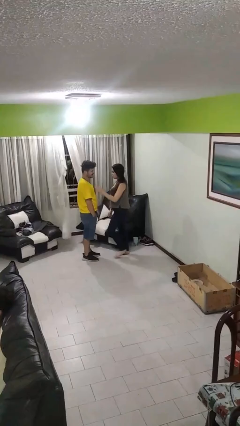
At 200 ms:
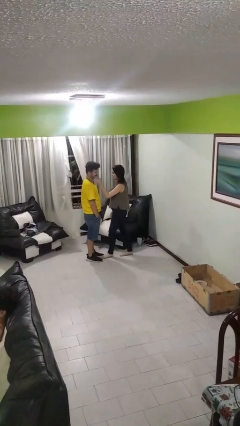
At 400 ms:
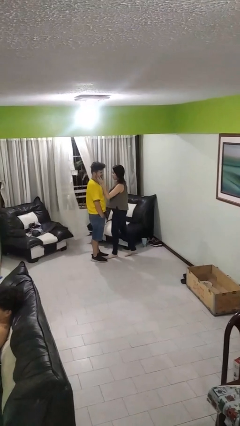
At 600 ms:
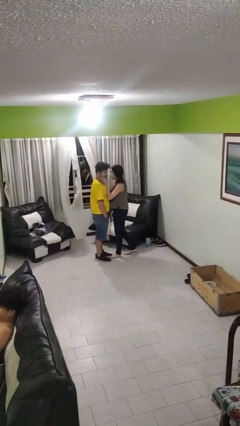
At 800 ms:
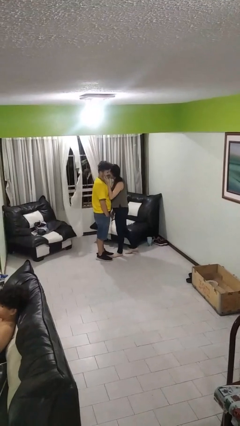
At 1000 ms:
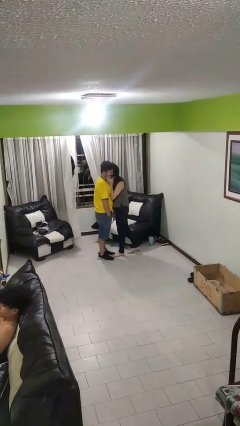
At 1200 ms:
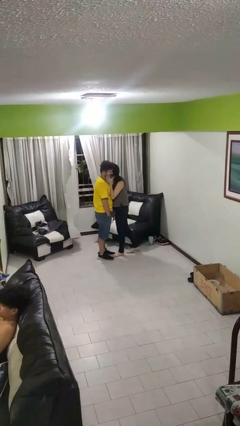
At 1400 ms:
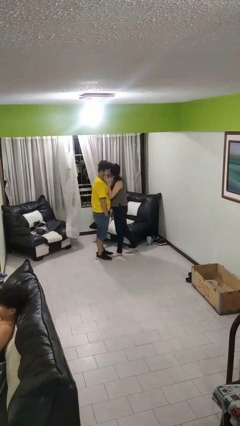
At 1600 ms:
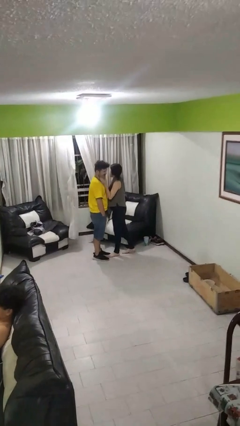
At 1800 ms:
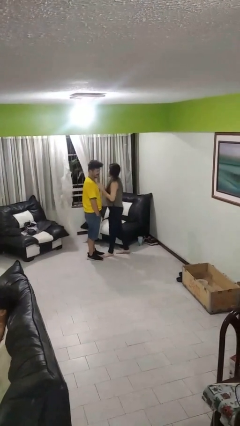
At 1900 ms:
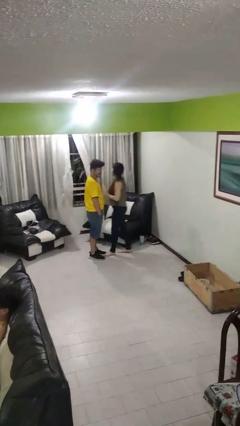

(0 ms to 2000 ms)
person kisses cheek of person

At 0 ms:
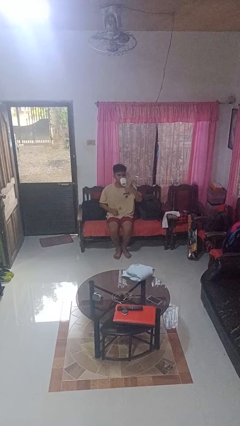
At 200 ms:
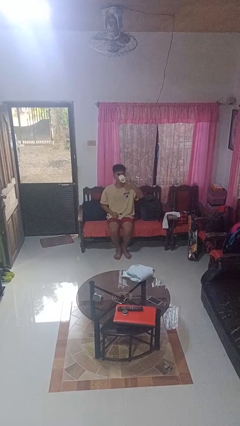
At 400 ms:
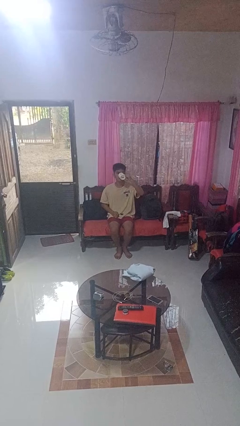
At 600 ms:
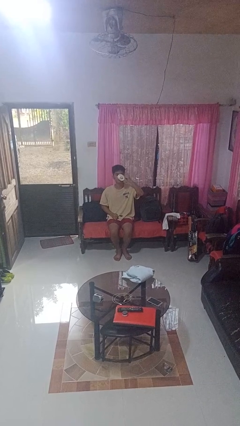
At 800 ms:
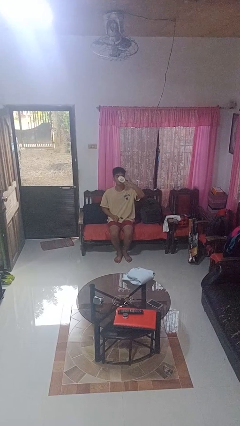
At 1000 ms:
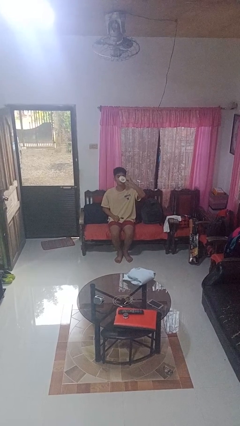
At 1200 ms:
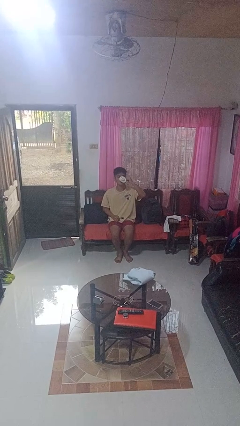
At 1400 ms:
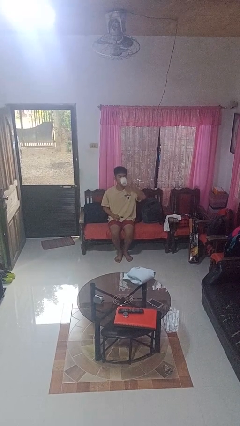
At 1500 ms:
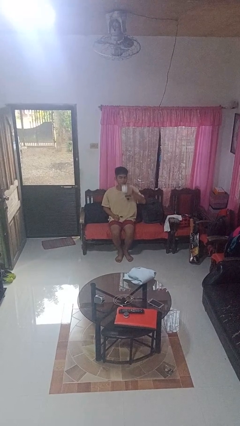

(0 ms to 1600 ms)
person drinks from mug

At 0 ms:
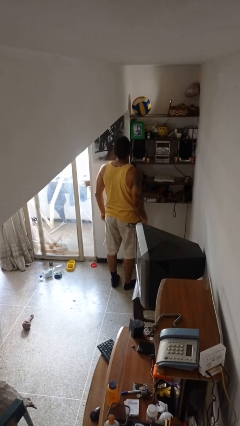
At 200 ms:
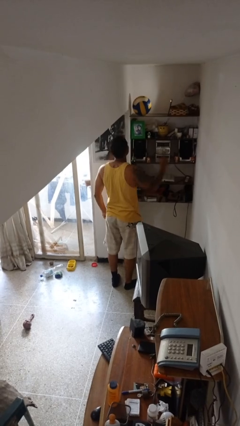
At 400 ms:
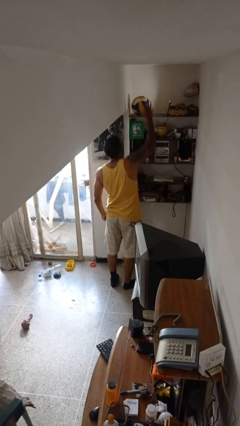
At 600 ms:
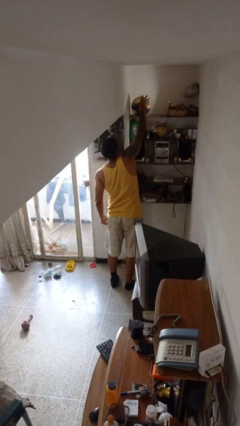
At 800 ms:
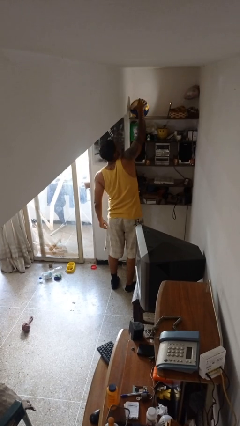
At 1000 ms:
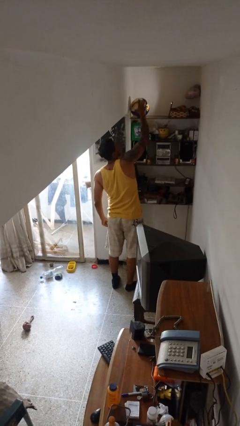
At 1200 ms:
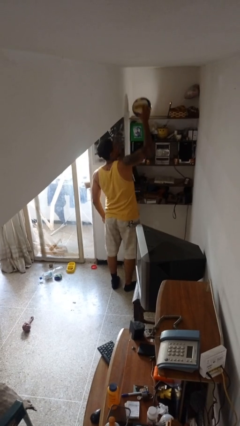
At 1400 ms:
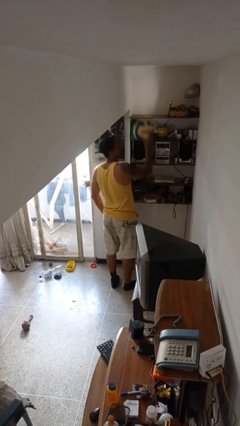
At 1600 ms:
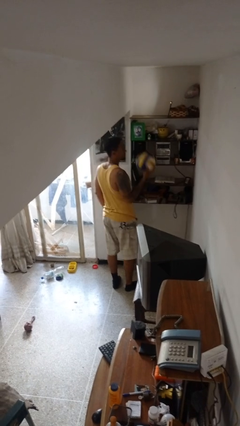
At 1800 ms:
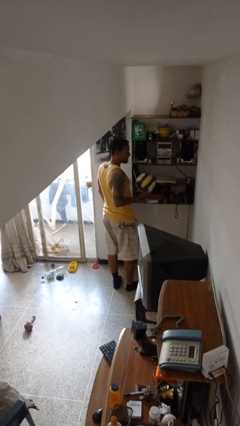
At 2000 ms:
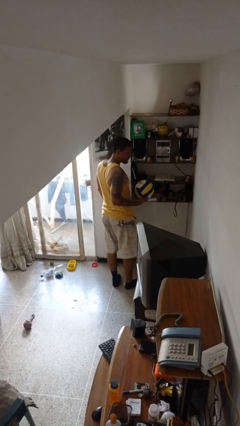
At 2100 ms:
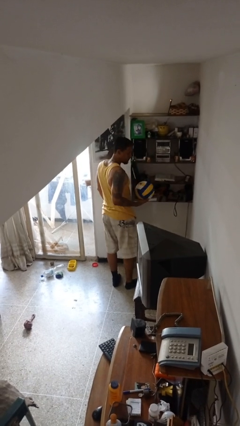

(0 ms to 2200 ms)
person picks up object from shelf

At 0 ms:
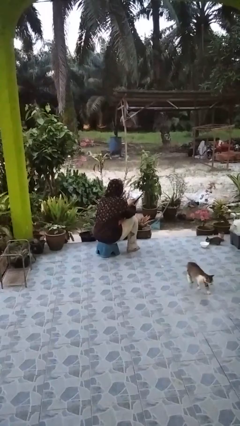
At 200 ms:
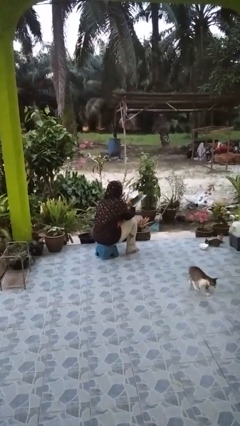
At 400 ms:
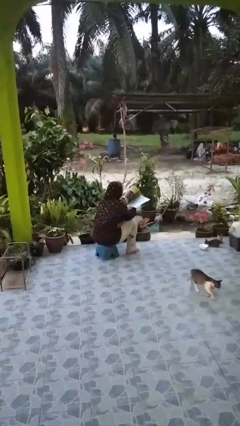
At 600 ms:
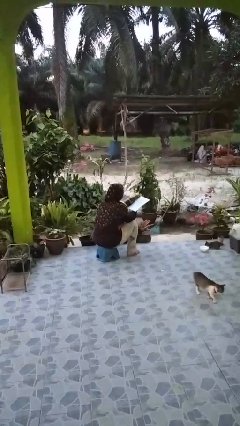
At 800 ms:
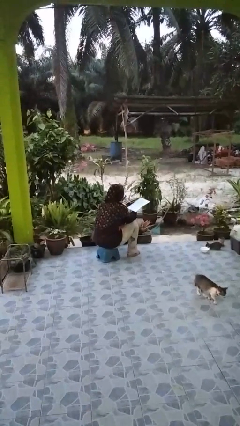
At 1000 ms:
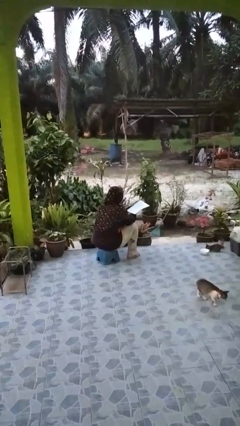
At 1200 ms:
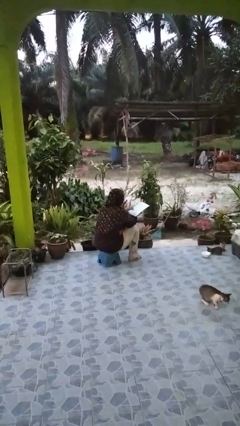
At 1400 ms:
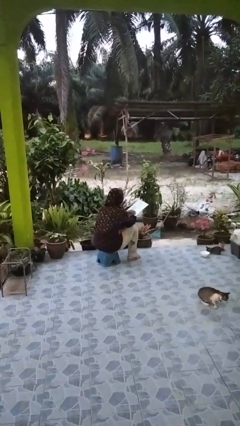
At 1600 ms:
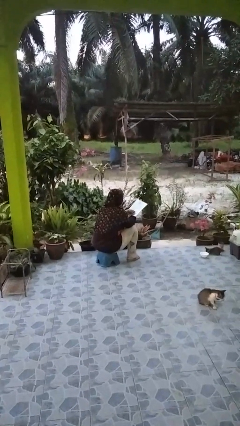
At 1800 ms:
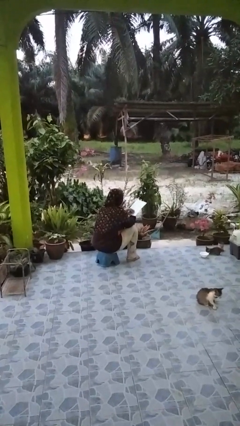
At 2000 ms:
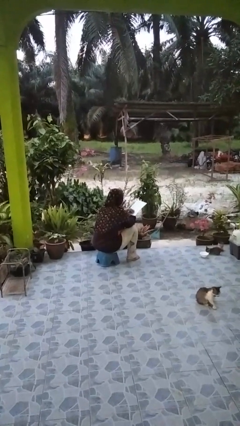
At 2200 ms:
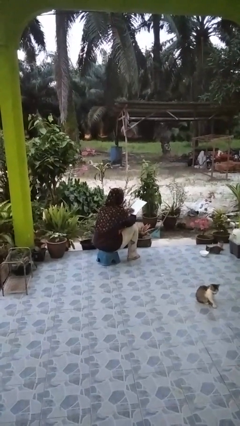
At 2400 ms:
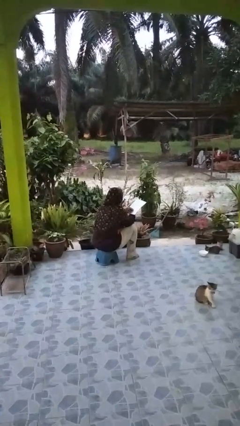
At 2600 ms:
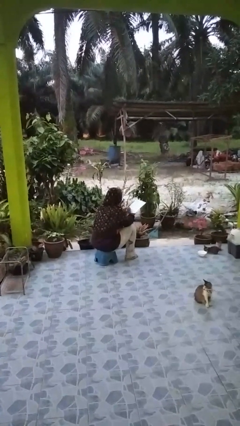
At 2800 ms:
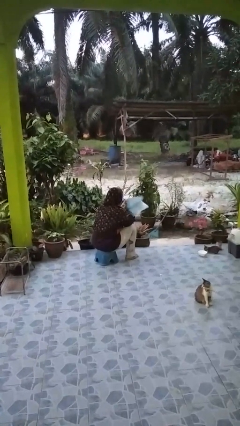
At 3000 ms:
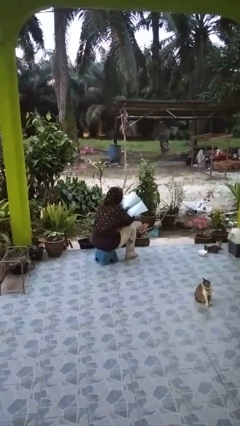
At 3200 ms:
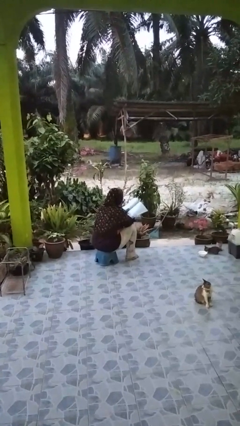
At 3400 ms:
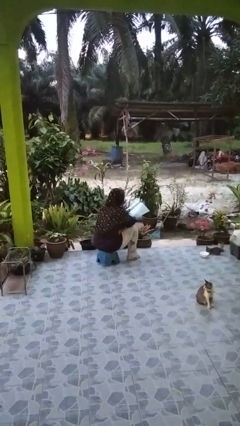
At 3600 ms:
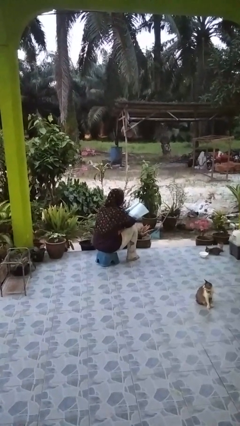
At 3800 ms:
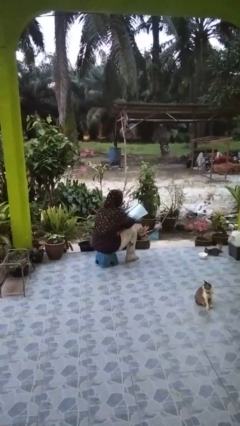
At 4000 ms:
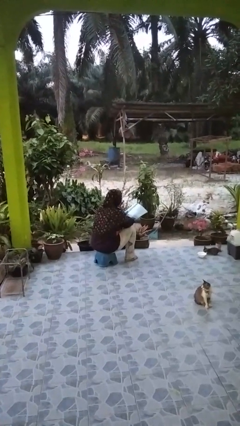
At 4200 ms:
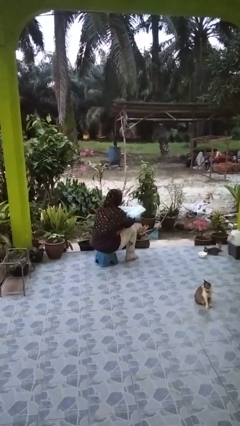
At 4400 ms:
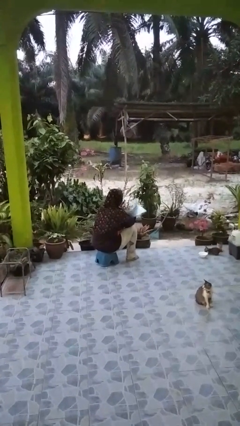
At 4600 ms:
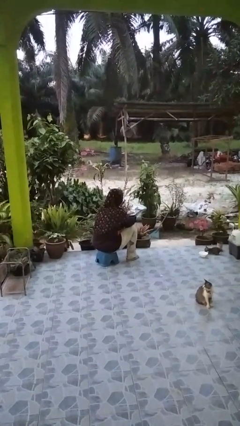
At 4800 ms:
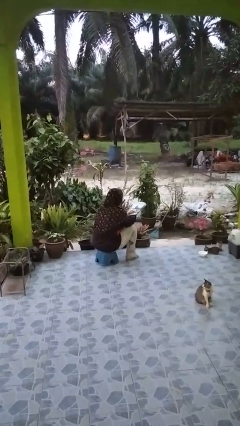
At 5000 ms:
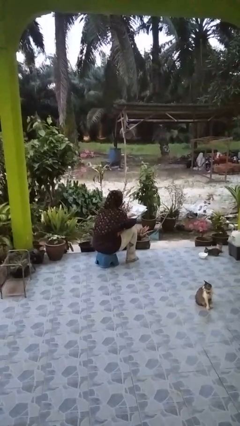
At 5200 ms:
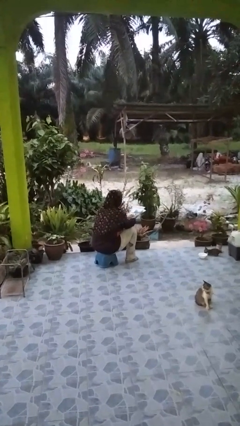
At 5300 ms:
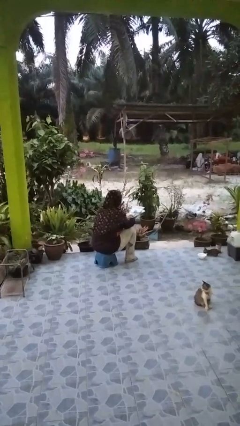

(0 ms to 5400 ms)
person reads magazine

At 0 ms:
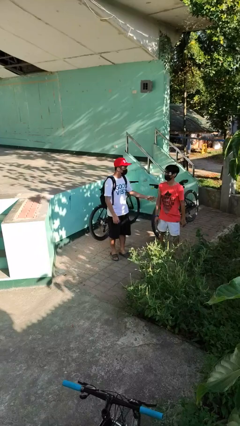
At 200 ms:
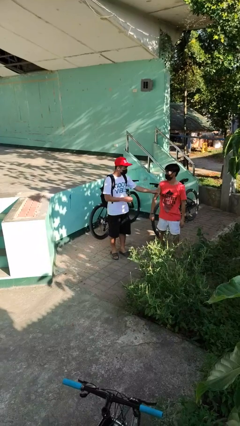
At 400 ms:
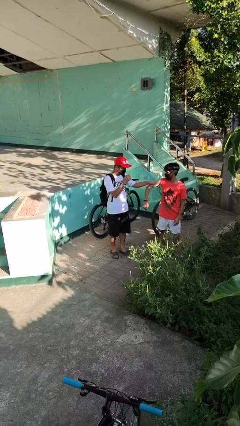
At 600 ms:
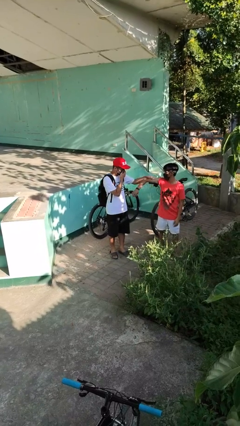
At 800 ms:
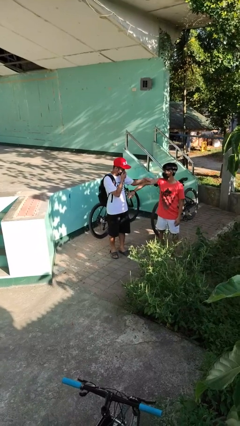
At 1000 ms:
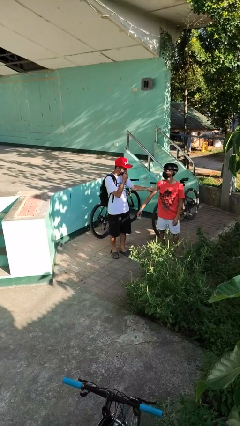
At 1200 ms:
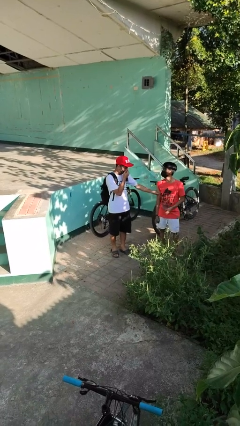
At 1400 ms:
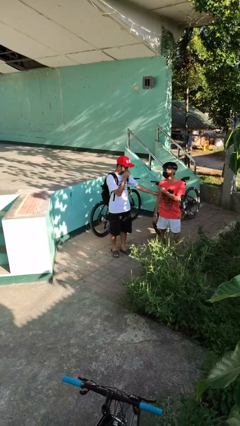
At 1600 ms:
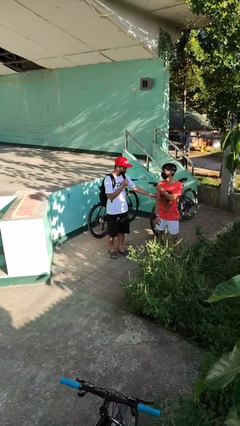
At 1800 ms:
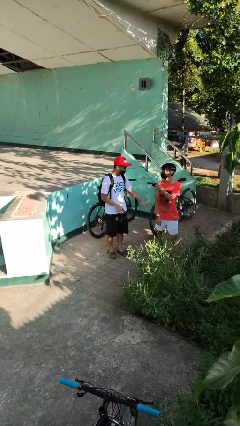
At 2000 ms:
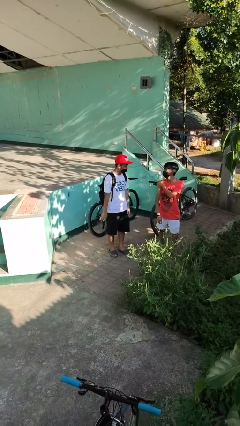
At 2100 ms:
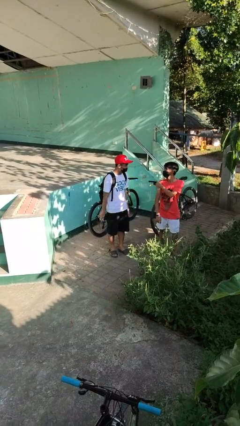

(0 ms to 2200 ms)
person grabs person by bicep

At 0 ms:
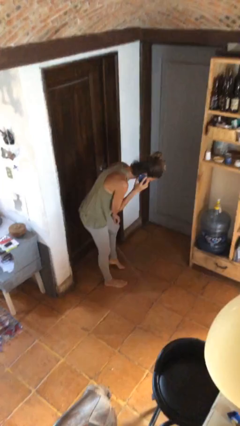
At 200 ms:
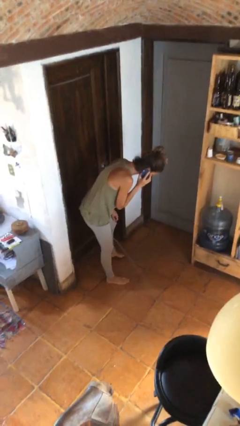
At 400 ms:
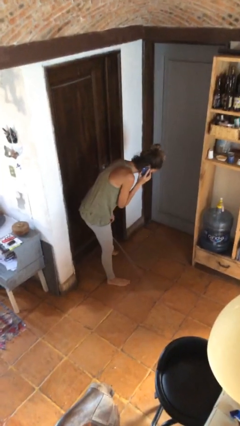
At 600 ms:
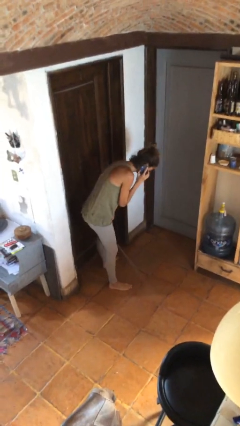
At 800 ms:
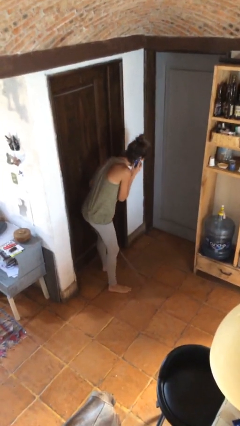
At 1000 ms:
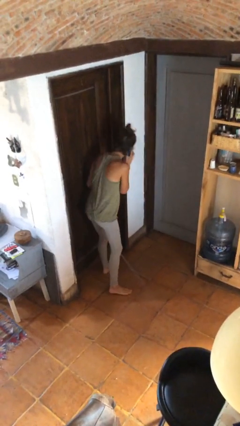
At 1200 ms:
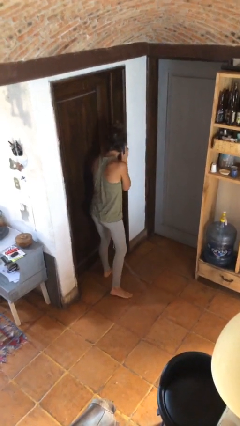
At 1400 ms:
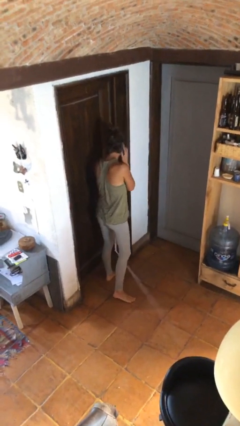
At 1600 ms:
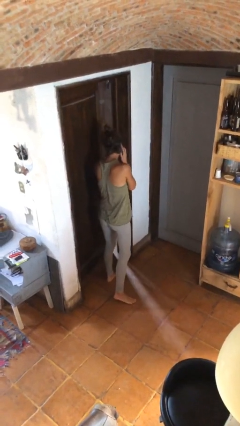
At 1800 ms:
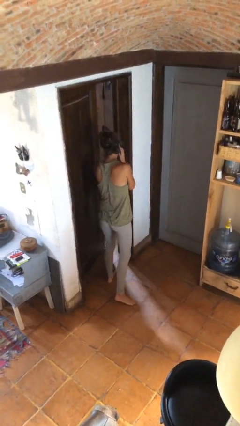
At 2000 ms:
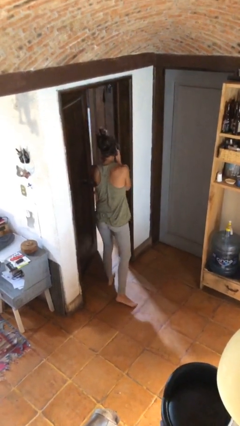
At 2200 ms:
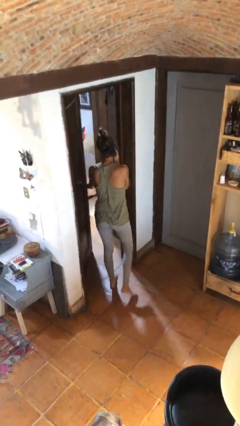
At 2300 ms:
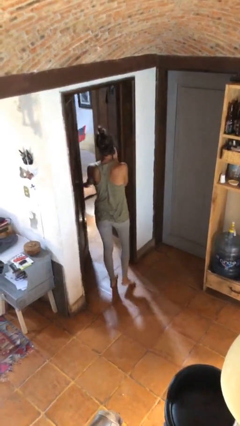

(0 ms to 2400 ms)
person opens facility door

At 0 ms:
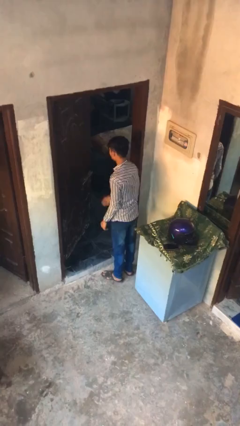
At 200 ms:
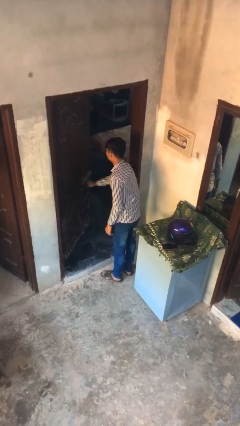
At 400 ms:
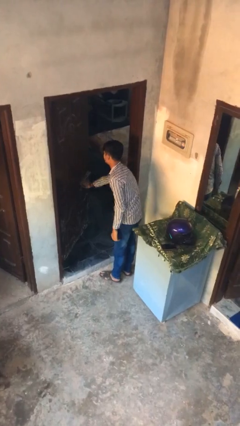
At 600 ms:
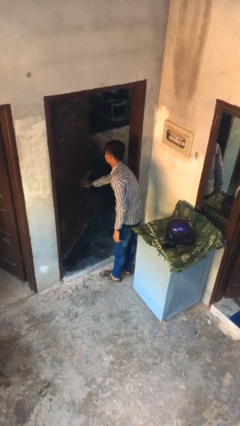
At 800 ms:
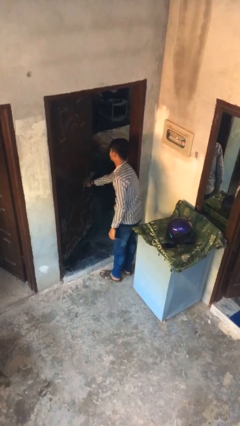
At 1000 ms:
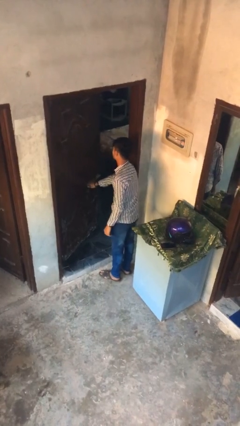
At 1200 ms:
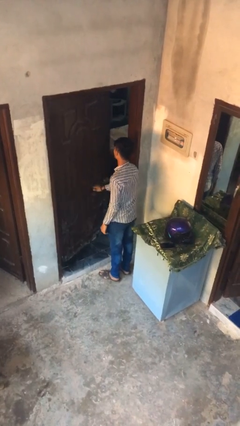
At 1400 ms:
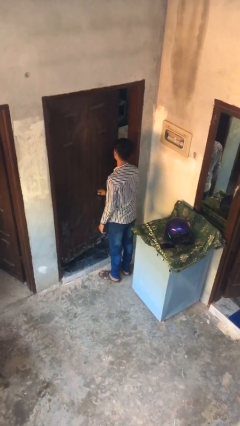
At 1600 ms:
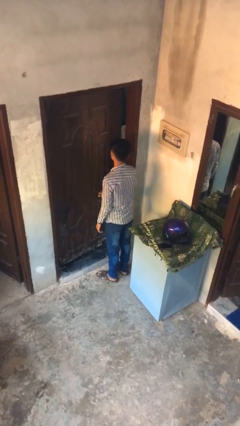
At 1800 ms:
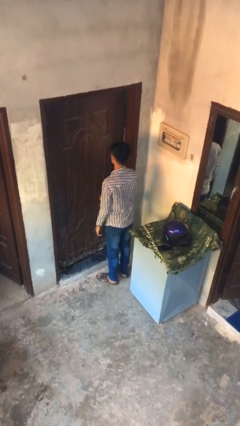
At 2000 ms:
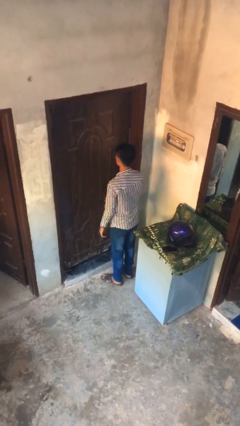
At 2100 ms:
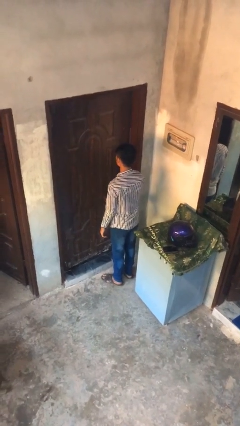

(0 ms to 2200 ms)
person closes facility door
